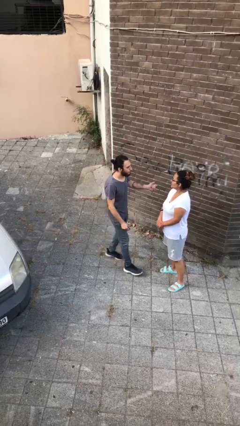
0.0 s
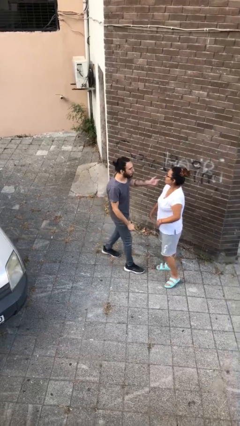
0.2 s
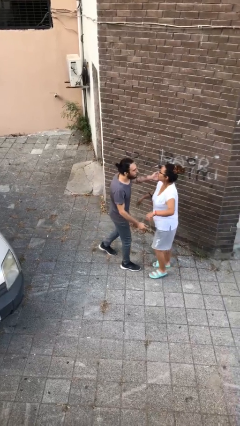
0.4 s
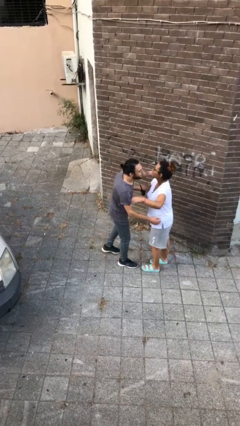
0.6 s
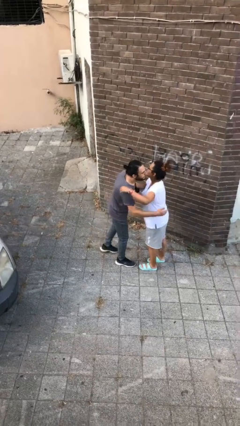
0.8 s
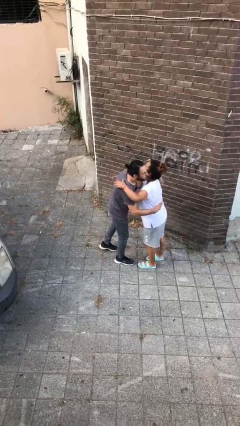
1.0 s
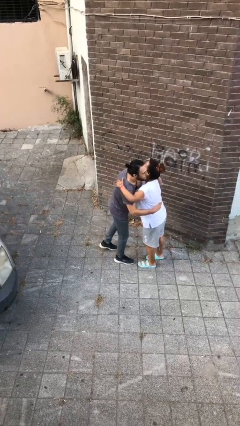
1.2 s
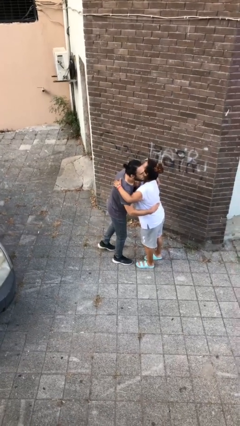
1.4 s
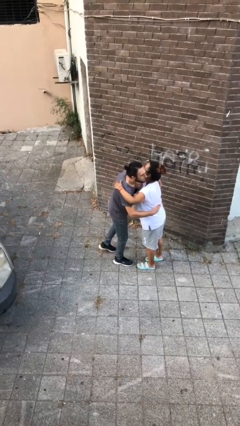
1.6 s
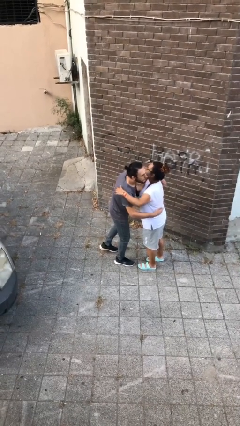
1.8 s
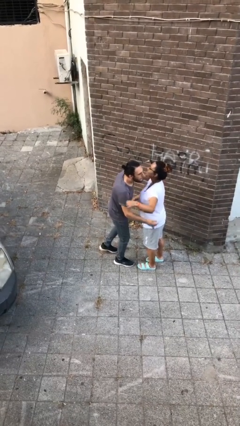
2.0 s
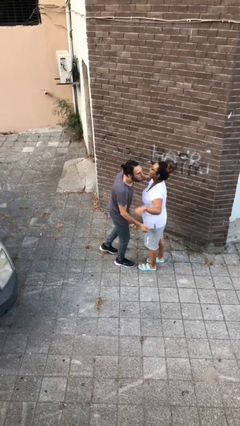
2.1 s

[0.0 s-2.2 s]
person embraces person

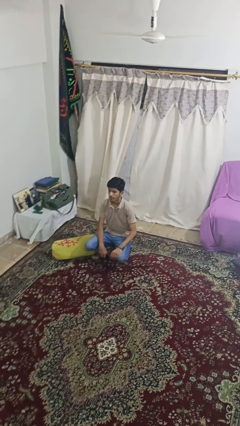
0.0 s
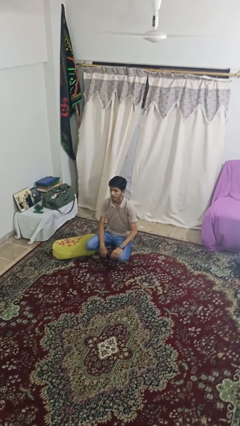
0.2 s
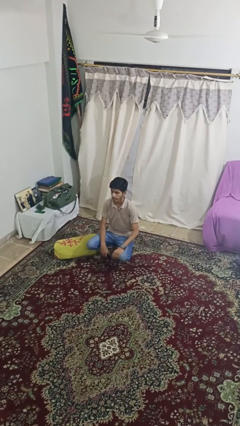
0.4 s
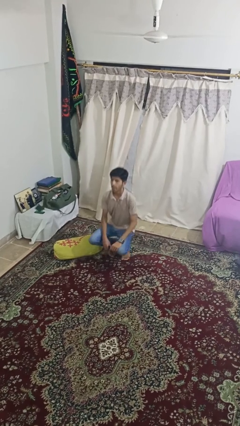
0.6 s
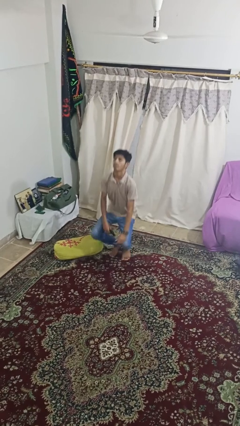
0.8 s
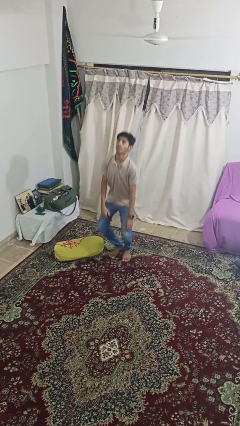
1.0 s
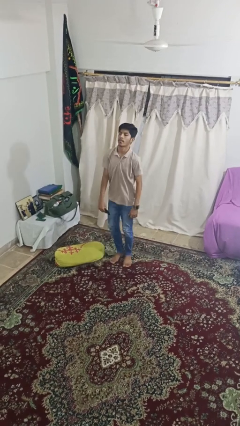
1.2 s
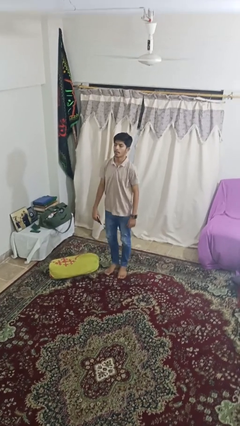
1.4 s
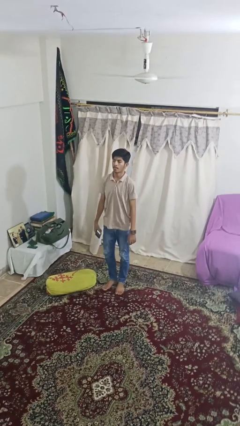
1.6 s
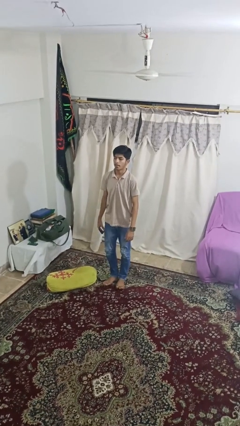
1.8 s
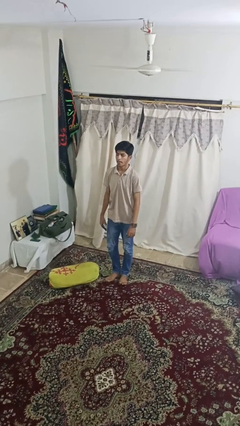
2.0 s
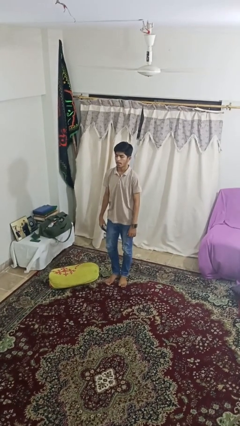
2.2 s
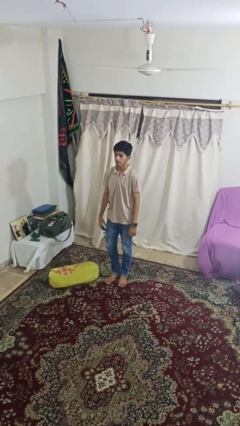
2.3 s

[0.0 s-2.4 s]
person stands up

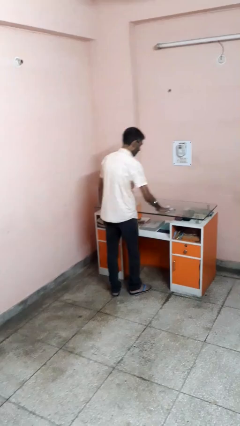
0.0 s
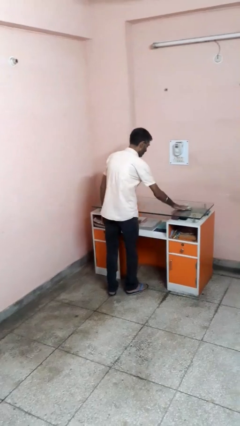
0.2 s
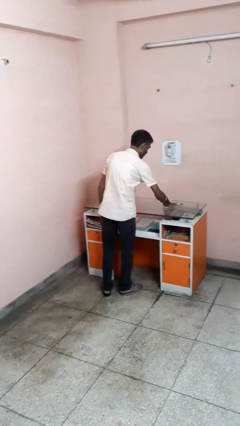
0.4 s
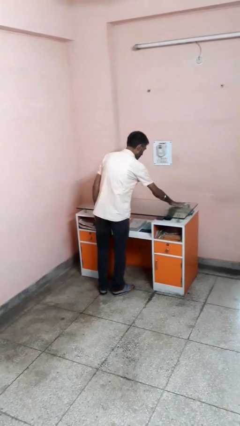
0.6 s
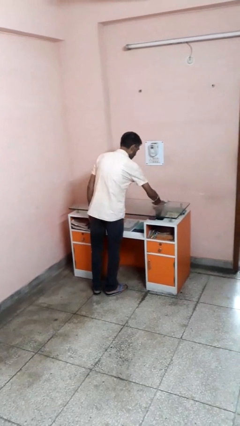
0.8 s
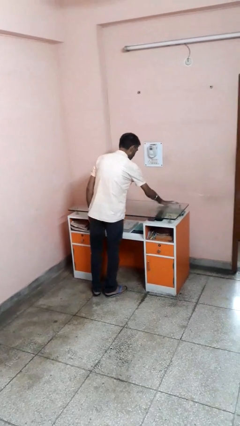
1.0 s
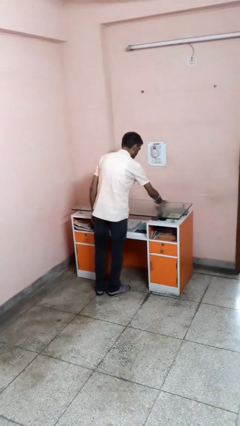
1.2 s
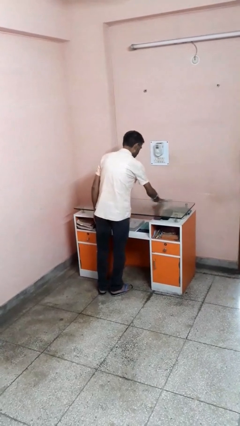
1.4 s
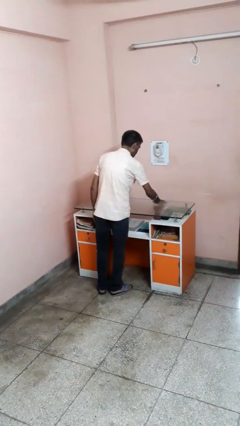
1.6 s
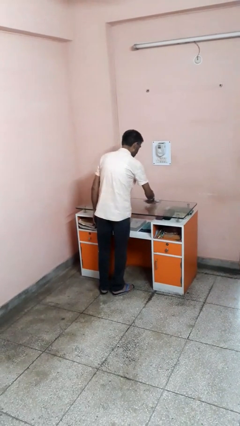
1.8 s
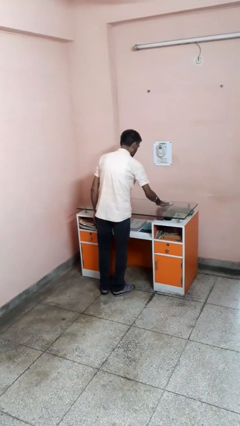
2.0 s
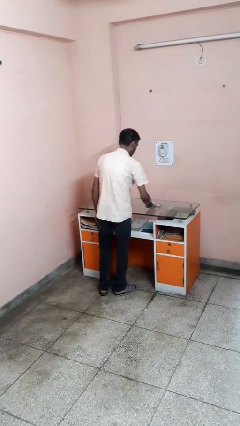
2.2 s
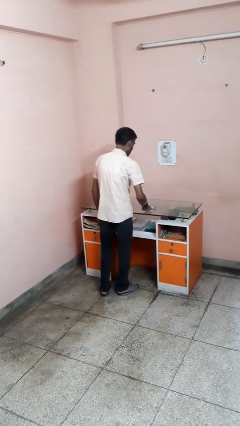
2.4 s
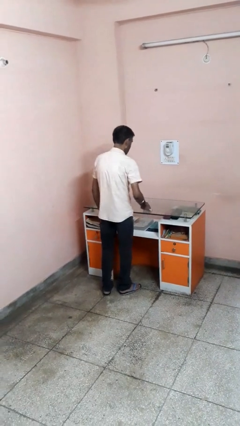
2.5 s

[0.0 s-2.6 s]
person cleans table with rag

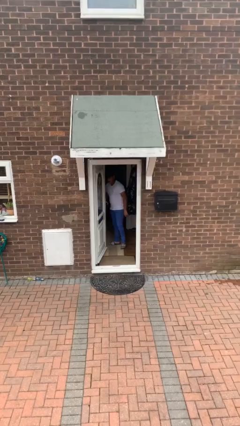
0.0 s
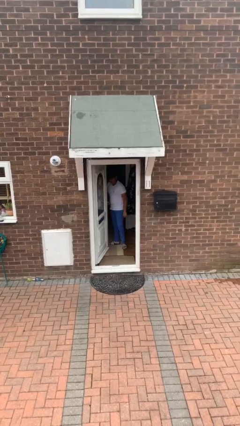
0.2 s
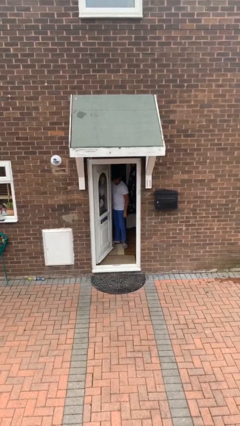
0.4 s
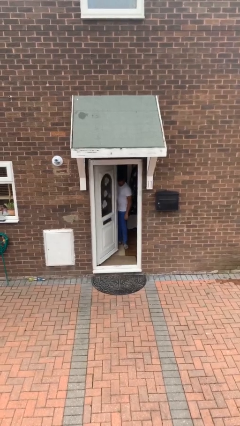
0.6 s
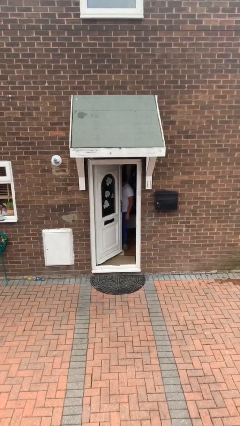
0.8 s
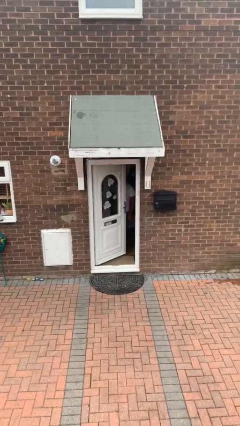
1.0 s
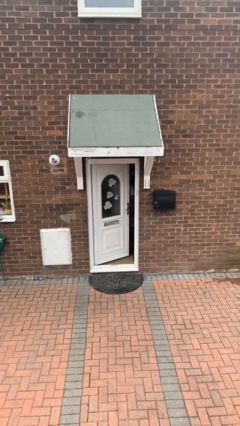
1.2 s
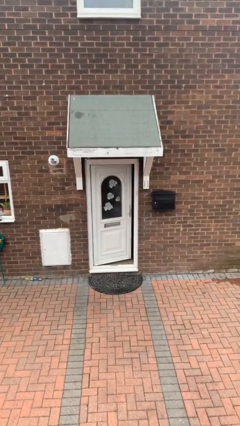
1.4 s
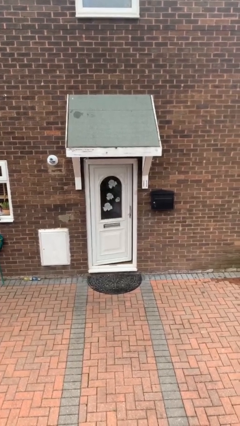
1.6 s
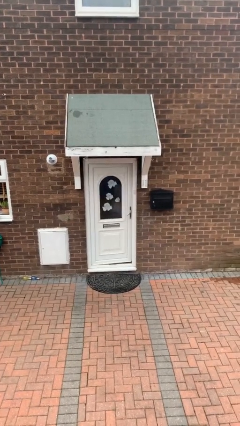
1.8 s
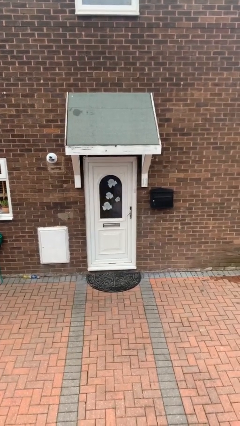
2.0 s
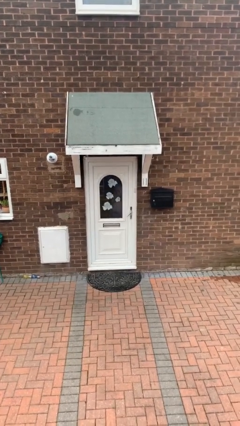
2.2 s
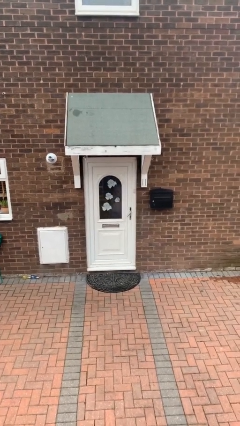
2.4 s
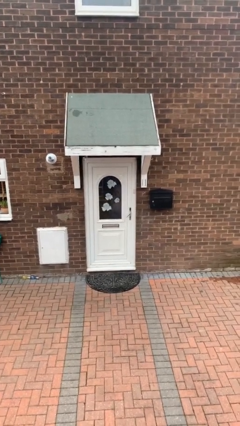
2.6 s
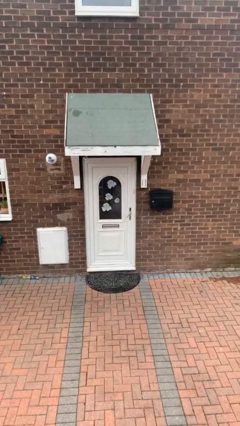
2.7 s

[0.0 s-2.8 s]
person closes facility door

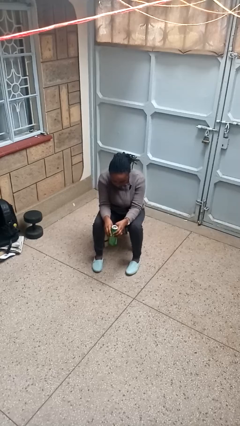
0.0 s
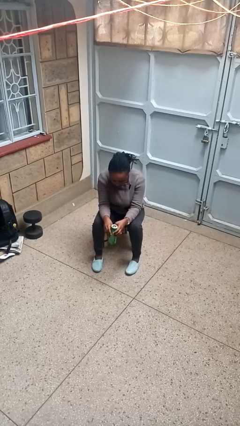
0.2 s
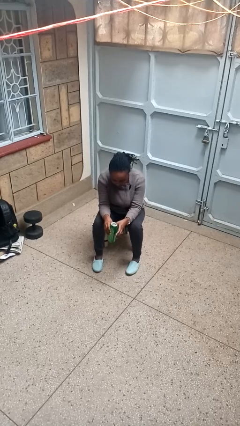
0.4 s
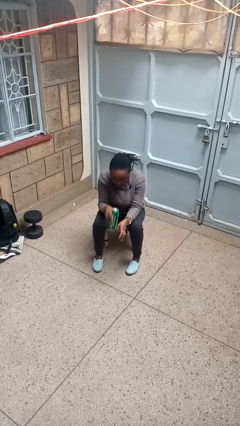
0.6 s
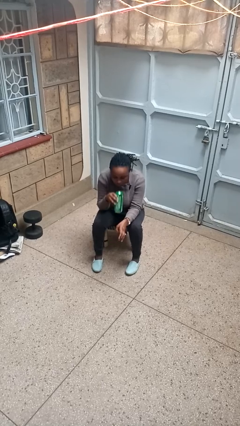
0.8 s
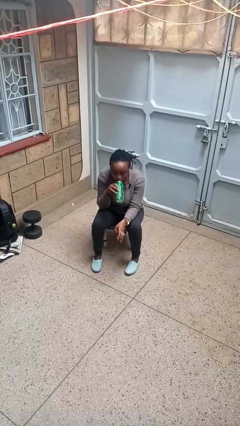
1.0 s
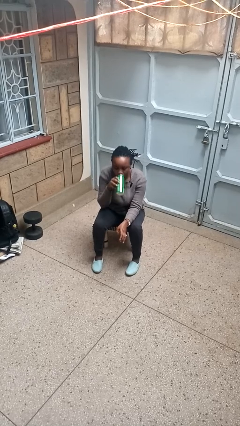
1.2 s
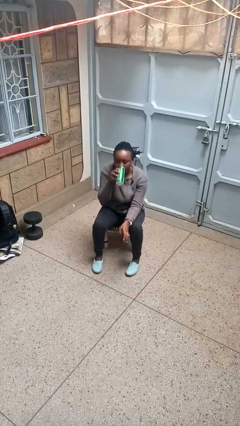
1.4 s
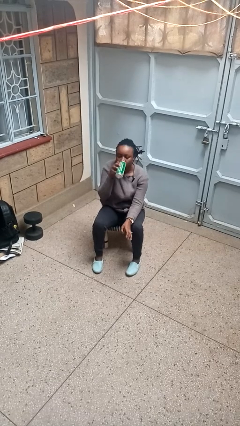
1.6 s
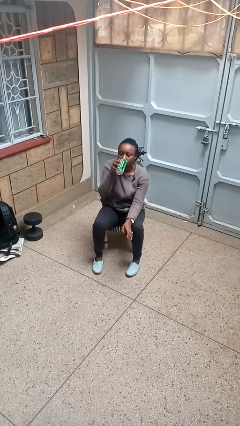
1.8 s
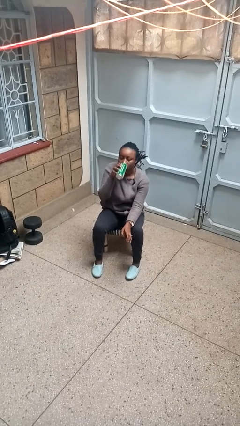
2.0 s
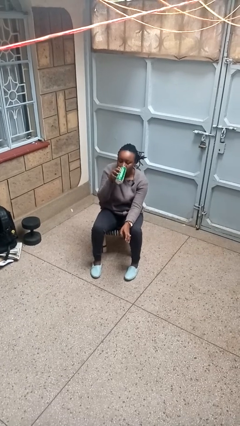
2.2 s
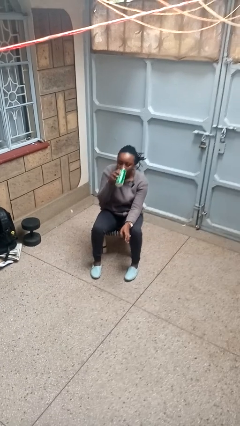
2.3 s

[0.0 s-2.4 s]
person drinks from beverage can

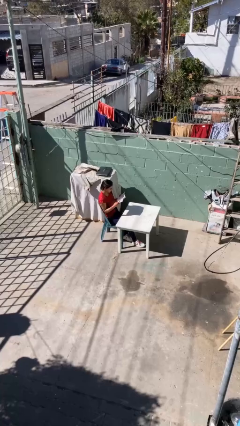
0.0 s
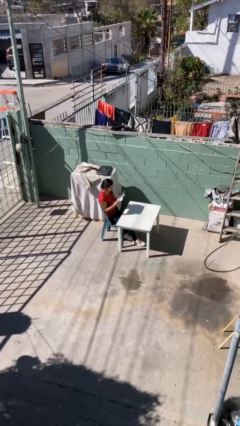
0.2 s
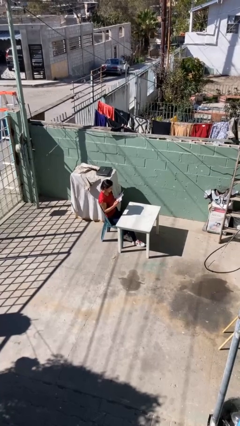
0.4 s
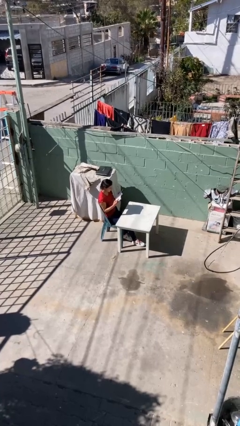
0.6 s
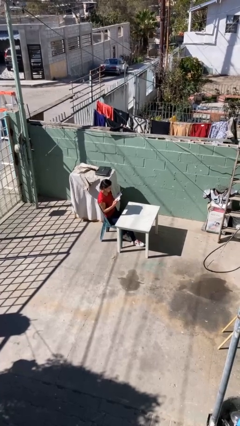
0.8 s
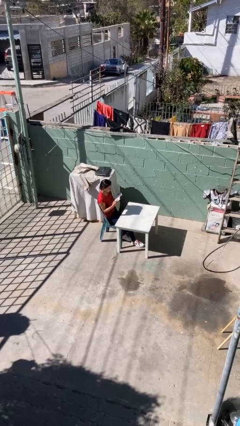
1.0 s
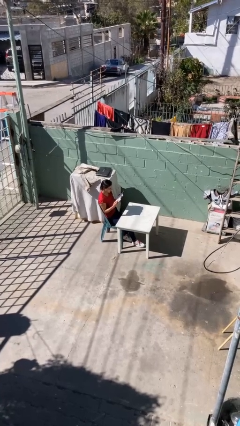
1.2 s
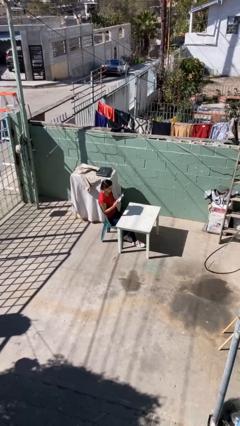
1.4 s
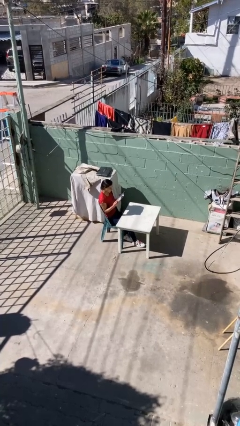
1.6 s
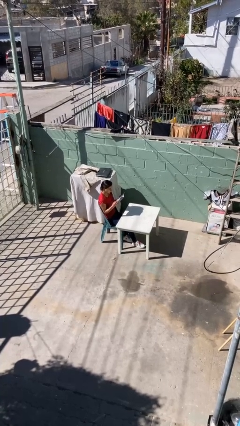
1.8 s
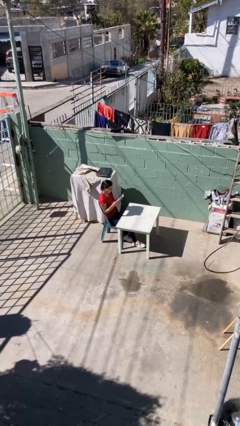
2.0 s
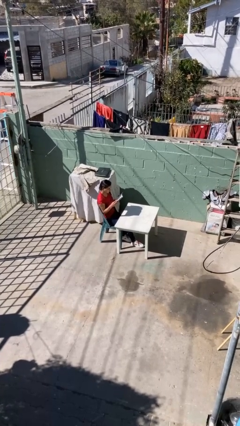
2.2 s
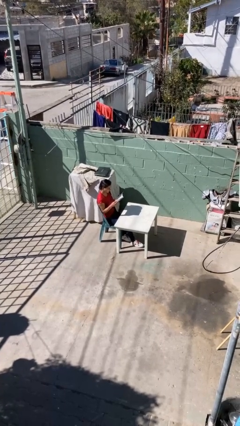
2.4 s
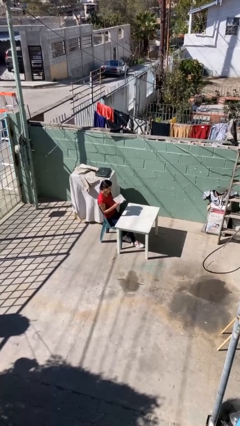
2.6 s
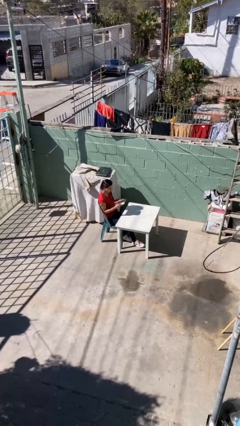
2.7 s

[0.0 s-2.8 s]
person reads document

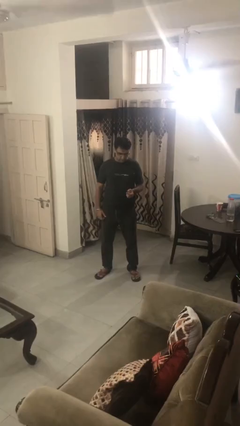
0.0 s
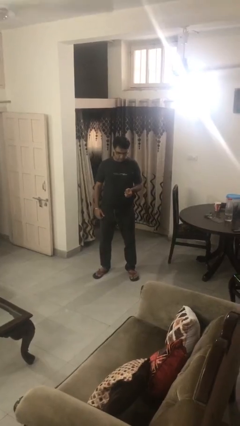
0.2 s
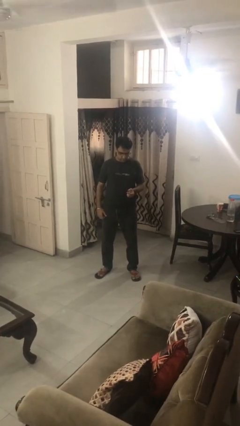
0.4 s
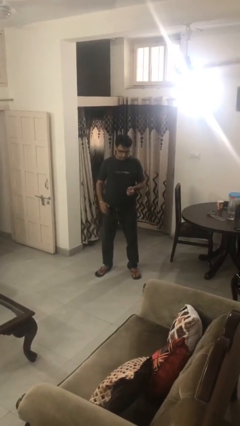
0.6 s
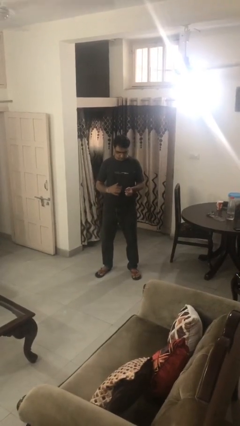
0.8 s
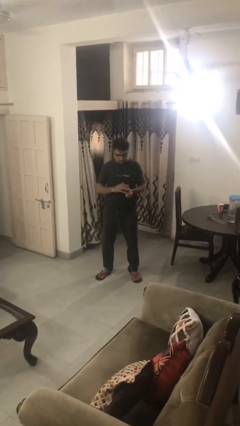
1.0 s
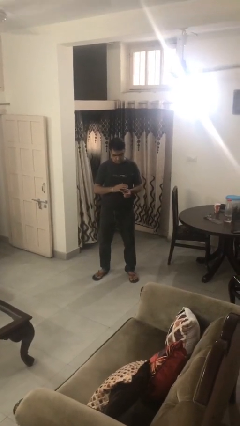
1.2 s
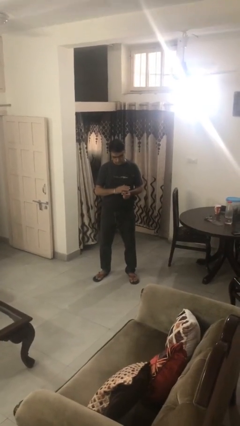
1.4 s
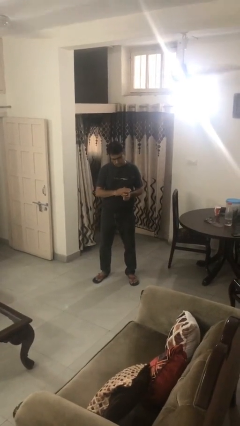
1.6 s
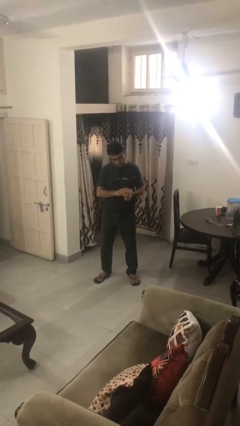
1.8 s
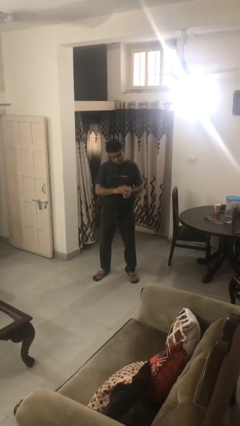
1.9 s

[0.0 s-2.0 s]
person puts on ring

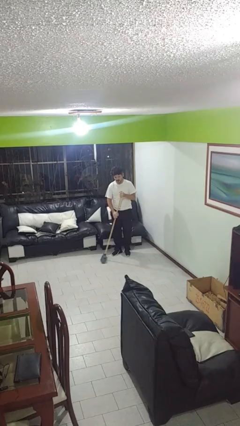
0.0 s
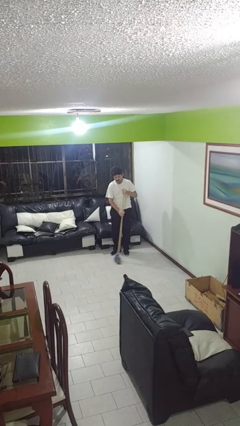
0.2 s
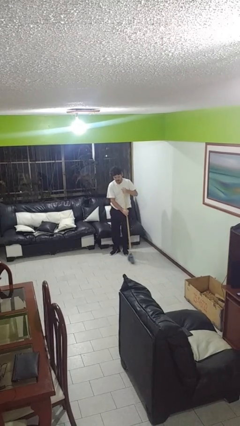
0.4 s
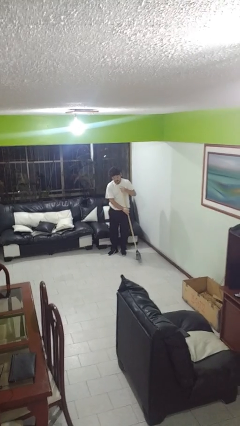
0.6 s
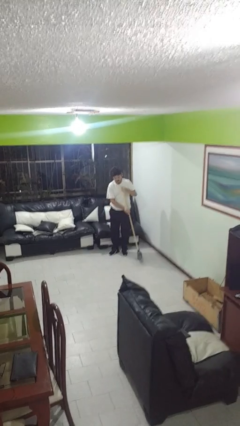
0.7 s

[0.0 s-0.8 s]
person sweeps floor
